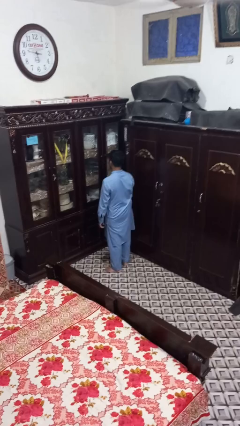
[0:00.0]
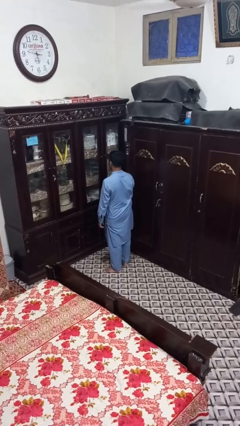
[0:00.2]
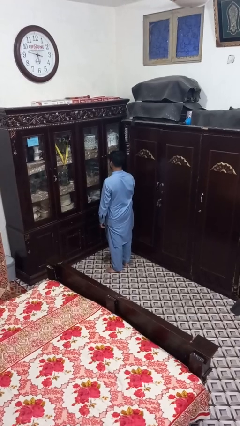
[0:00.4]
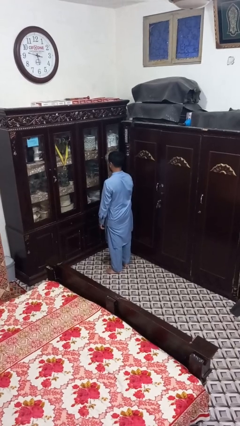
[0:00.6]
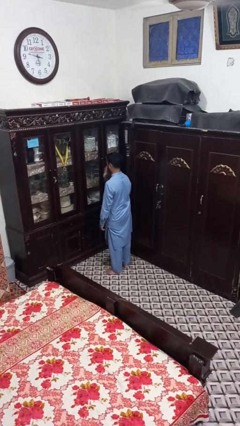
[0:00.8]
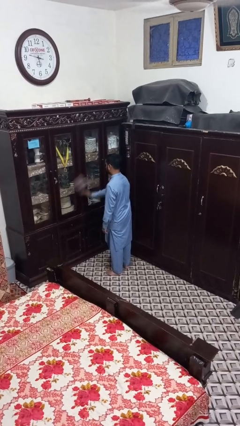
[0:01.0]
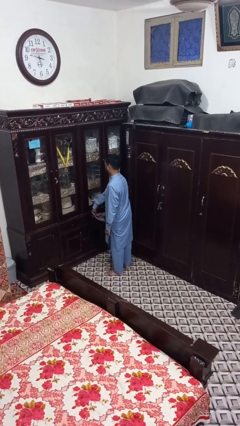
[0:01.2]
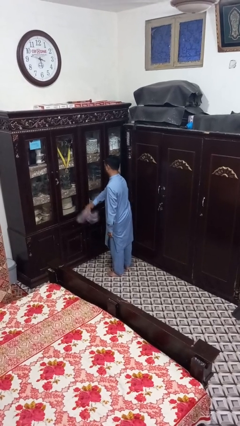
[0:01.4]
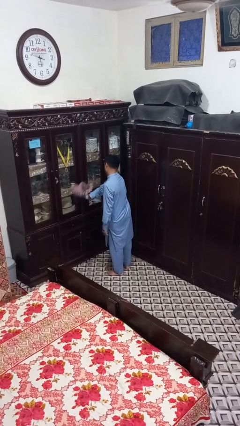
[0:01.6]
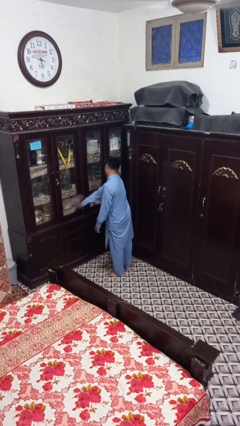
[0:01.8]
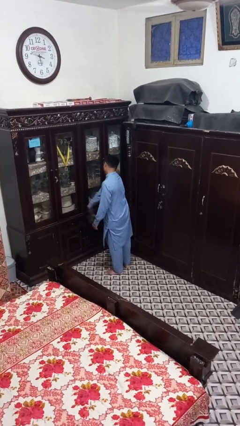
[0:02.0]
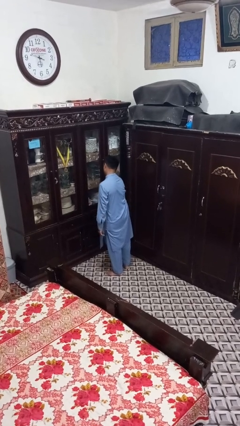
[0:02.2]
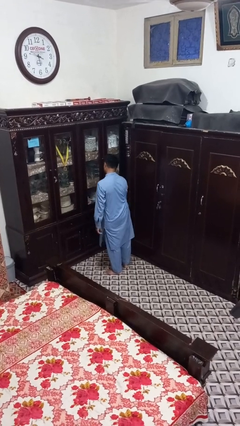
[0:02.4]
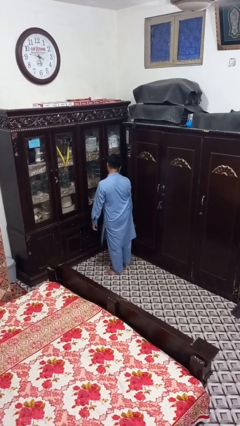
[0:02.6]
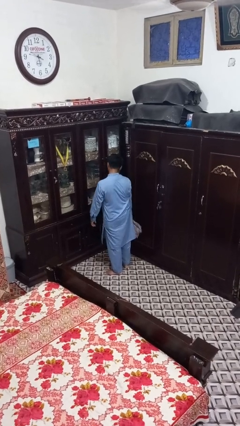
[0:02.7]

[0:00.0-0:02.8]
person dusts furniture

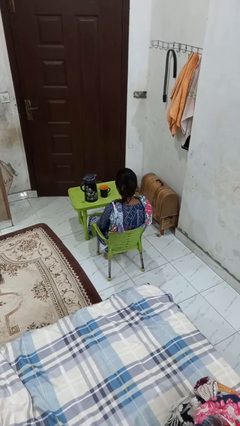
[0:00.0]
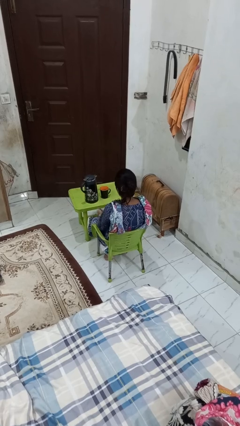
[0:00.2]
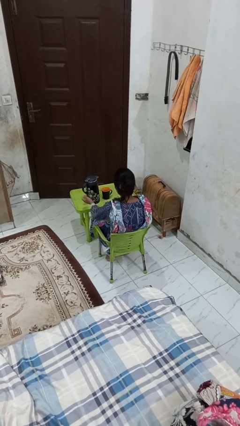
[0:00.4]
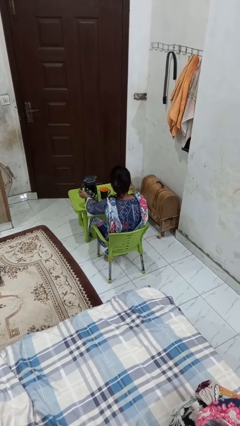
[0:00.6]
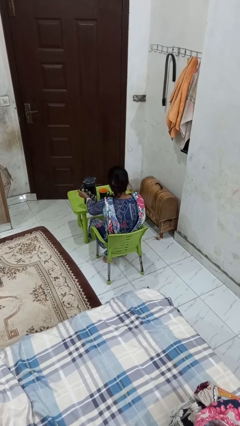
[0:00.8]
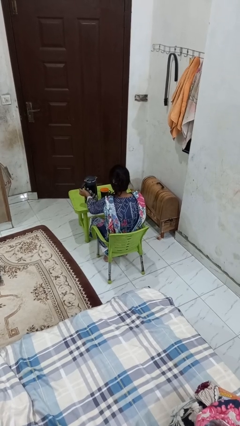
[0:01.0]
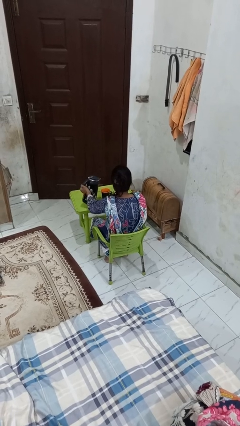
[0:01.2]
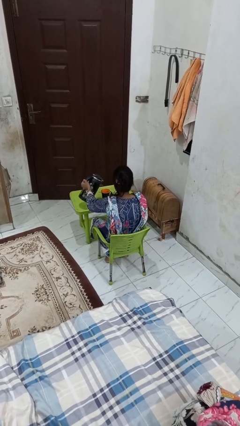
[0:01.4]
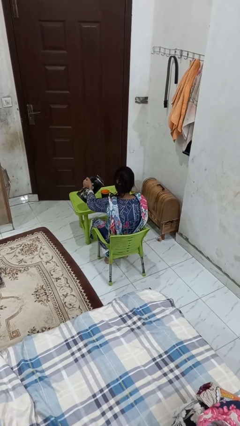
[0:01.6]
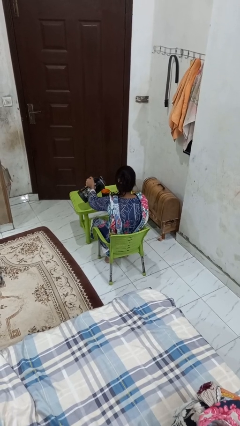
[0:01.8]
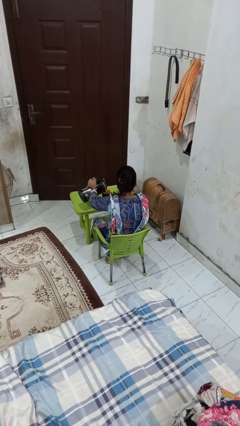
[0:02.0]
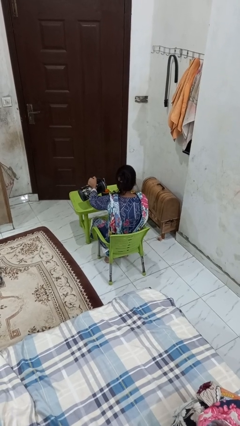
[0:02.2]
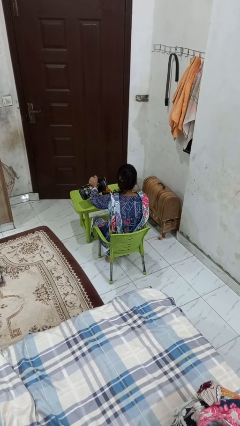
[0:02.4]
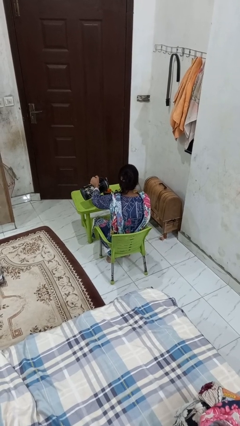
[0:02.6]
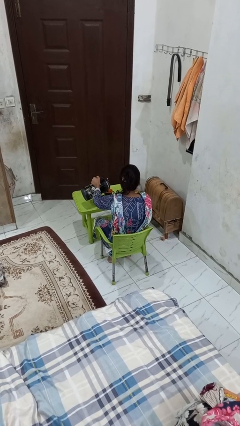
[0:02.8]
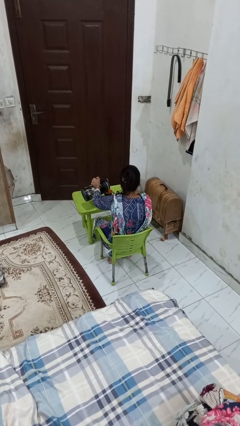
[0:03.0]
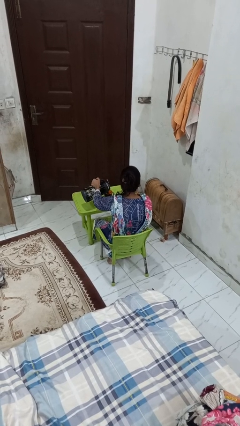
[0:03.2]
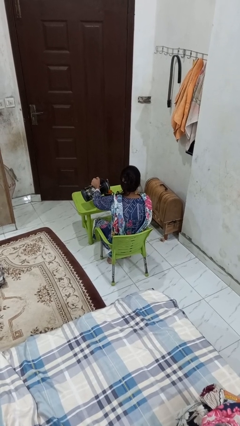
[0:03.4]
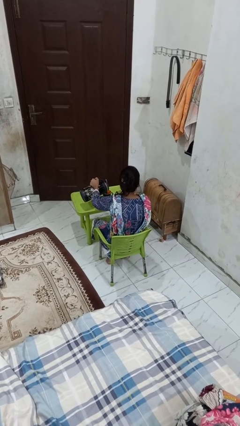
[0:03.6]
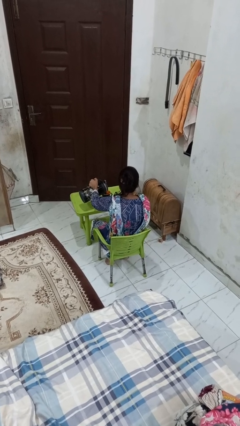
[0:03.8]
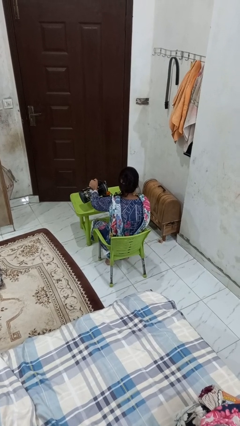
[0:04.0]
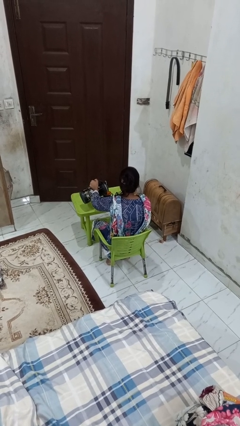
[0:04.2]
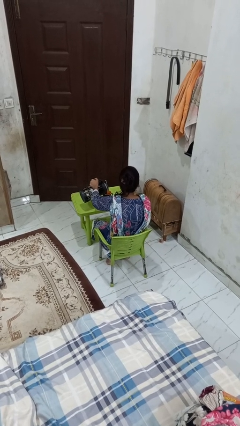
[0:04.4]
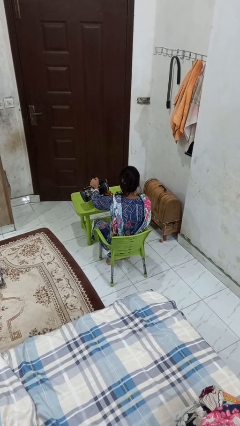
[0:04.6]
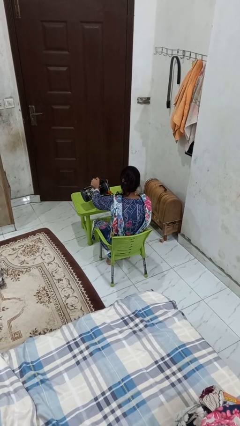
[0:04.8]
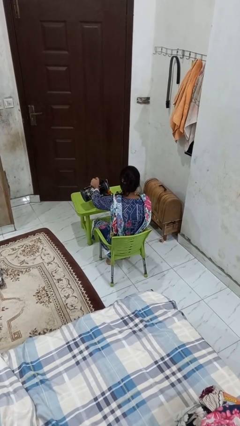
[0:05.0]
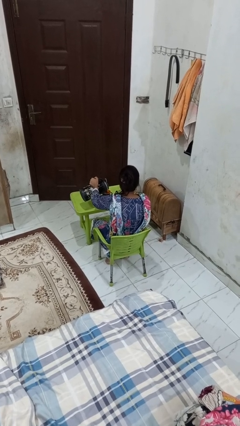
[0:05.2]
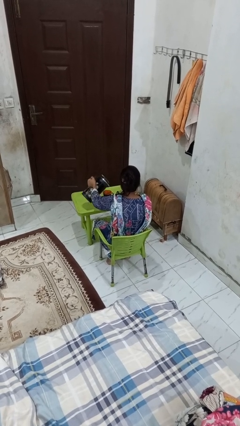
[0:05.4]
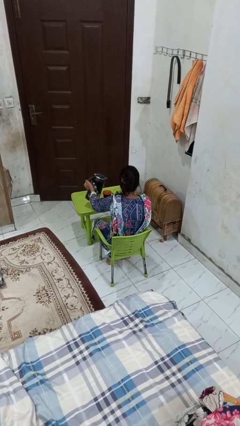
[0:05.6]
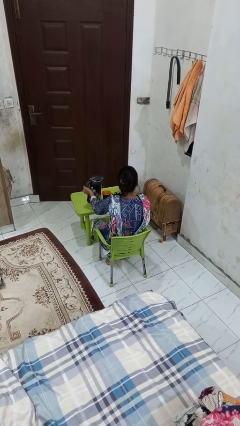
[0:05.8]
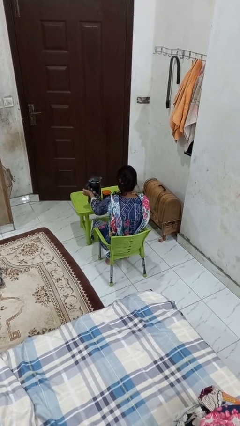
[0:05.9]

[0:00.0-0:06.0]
person pours coffee into mug

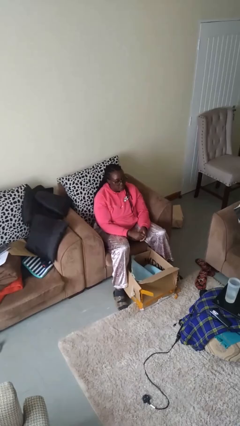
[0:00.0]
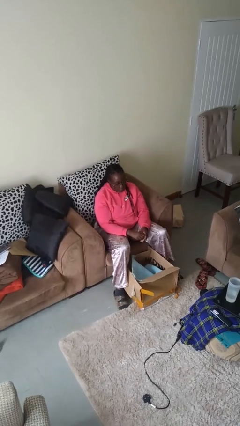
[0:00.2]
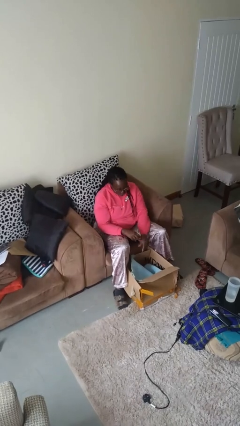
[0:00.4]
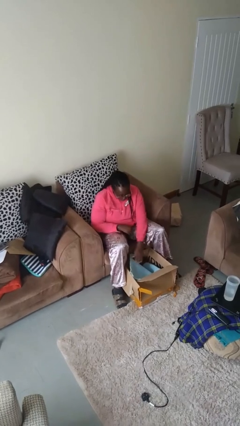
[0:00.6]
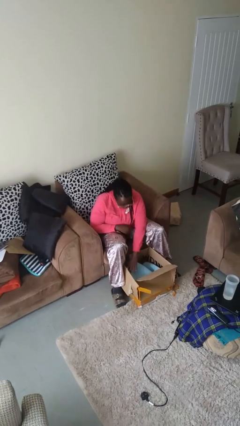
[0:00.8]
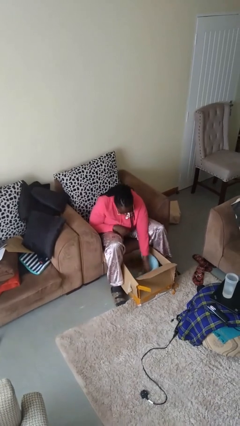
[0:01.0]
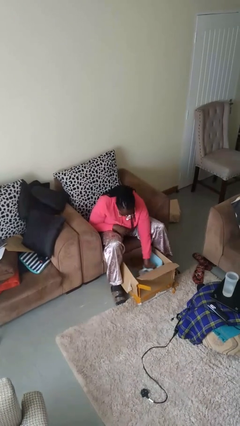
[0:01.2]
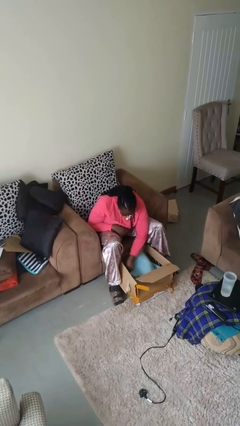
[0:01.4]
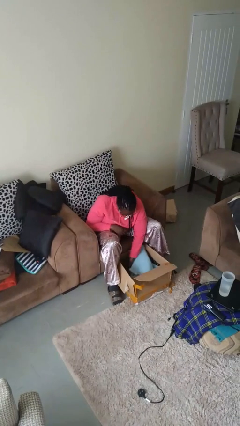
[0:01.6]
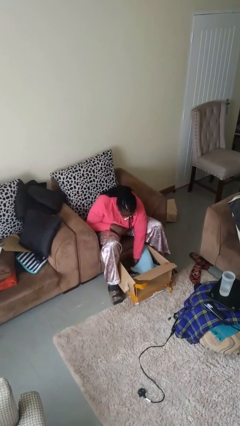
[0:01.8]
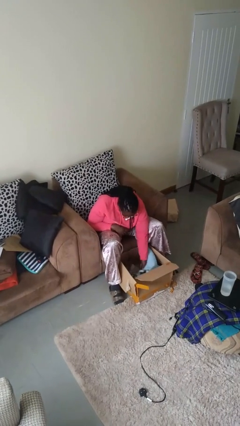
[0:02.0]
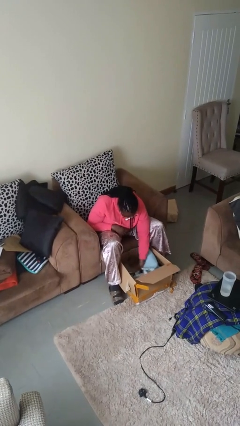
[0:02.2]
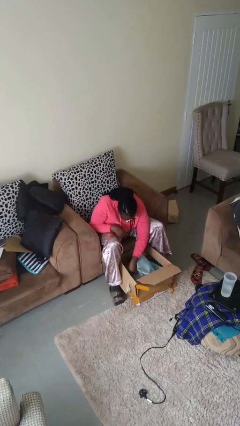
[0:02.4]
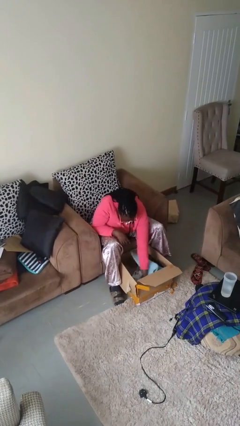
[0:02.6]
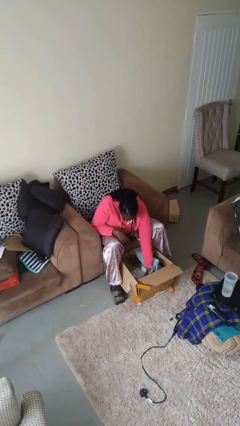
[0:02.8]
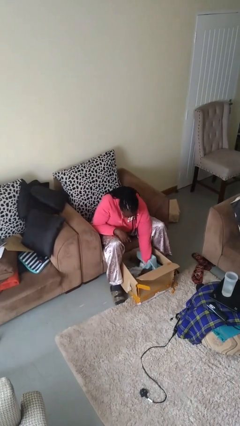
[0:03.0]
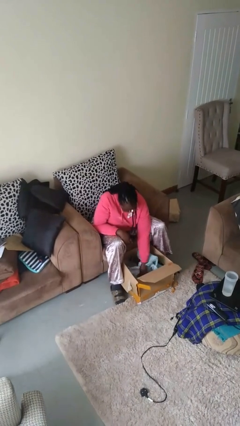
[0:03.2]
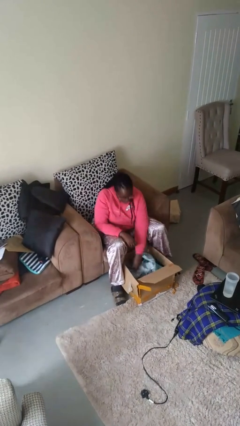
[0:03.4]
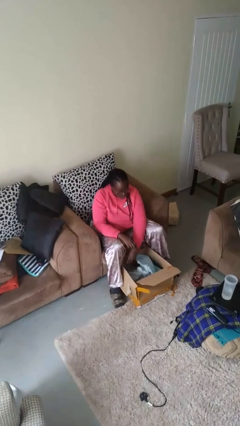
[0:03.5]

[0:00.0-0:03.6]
person searches in box

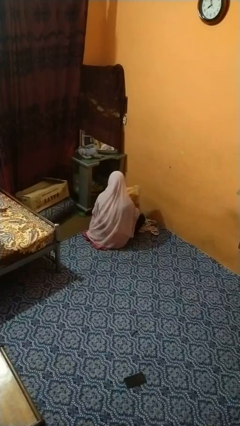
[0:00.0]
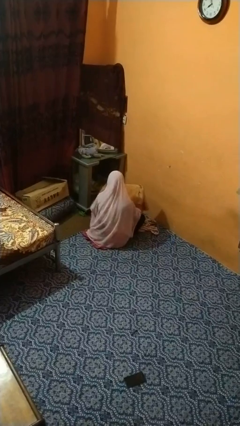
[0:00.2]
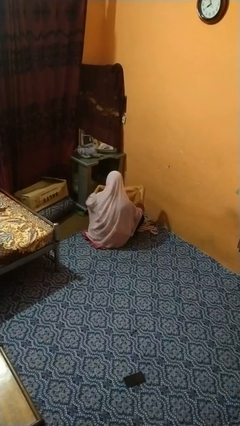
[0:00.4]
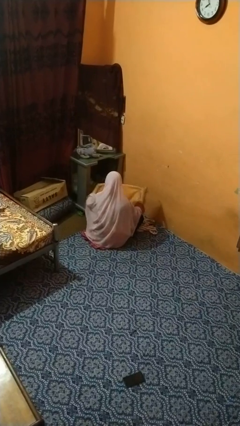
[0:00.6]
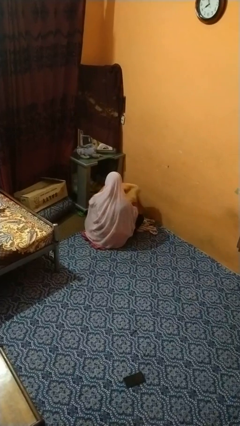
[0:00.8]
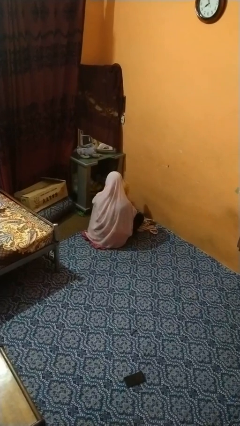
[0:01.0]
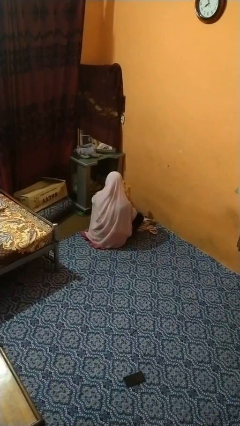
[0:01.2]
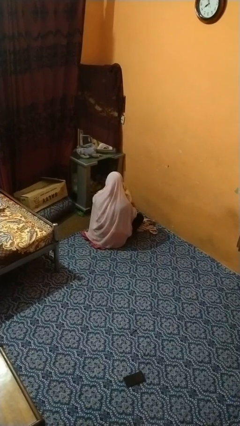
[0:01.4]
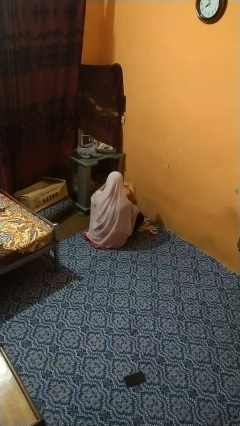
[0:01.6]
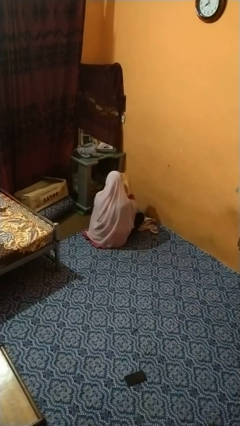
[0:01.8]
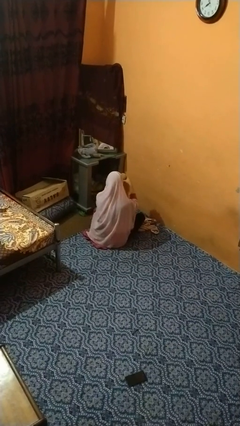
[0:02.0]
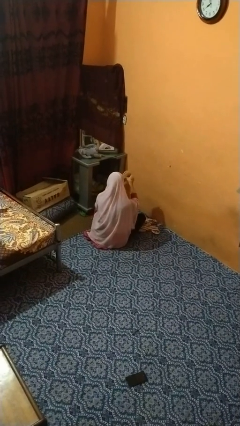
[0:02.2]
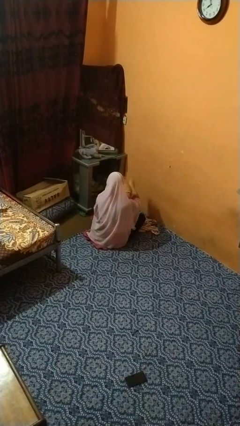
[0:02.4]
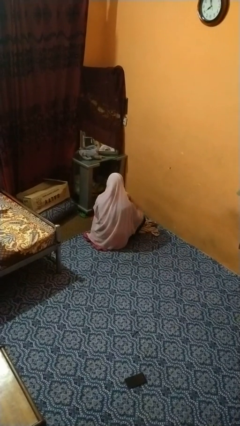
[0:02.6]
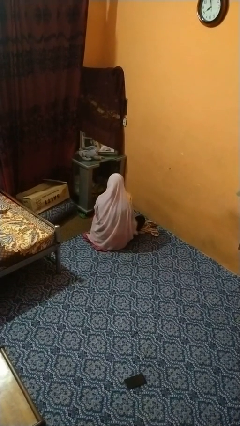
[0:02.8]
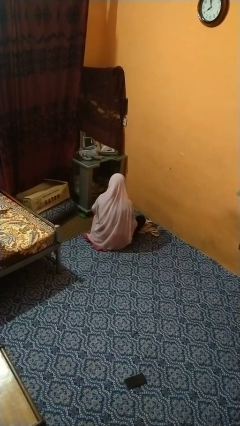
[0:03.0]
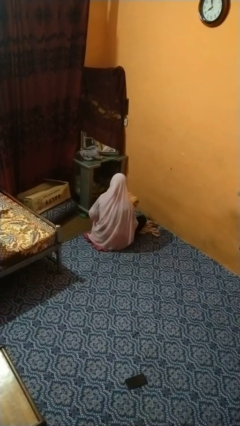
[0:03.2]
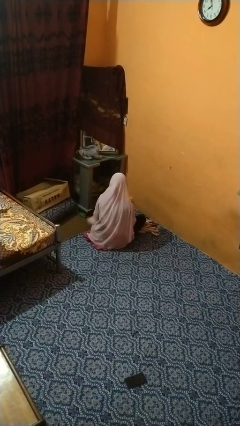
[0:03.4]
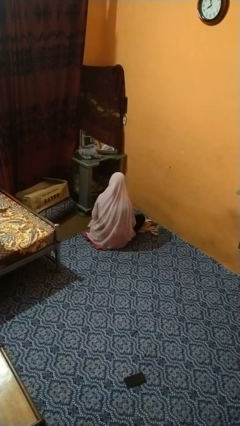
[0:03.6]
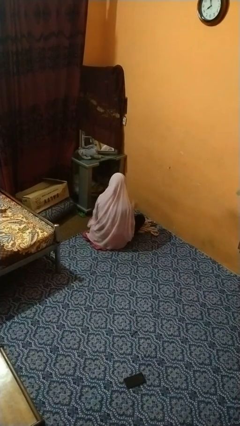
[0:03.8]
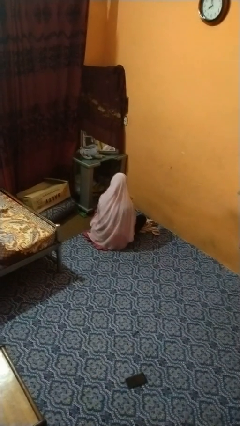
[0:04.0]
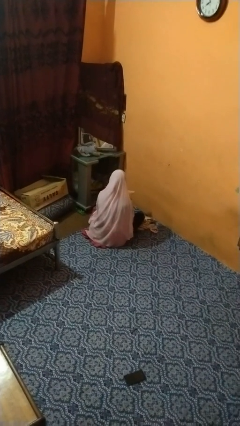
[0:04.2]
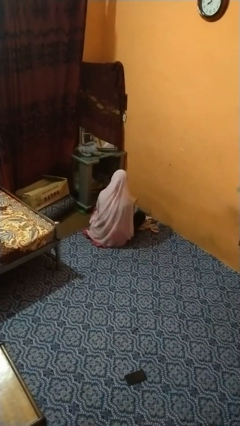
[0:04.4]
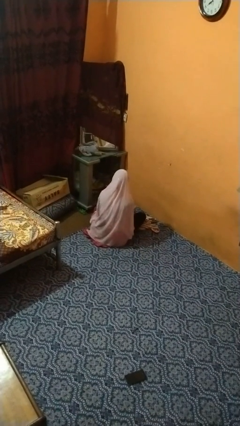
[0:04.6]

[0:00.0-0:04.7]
person folds towel

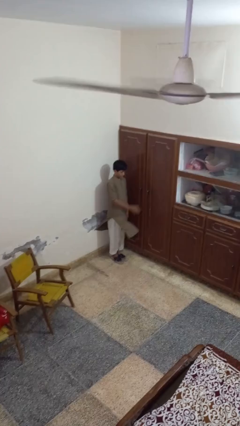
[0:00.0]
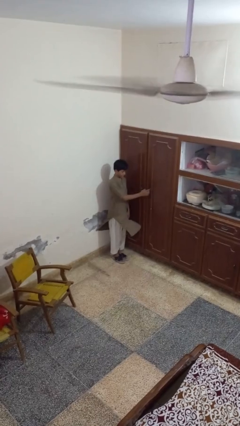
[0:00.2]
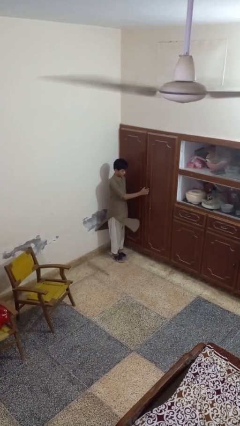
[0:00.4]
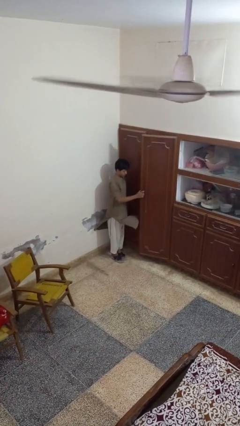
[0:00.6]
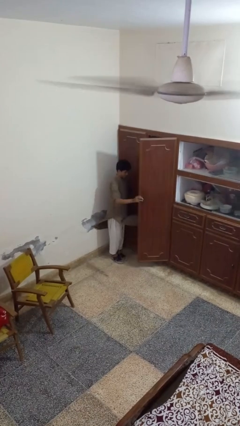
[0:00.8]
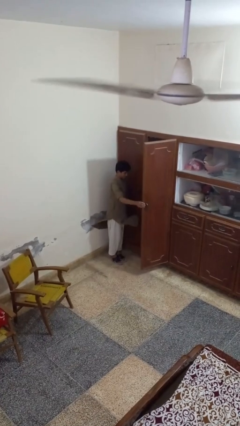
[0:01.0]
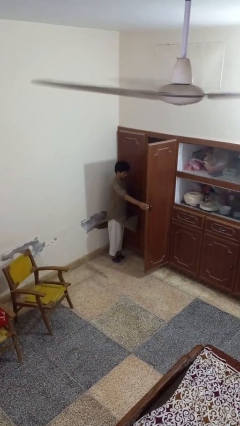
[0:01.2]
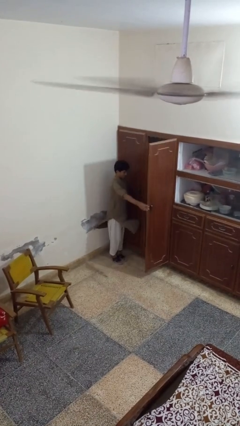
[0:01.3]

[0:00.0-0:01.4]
person opens closet door
